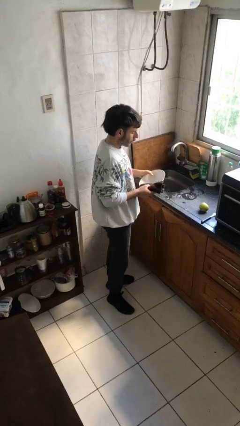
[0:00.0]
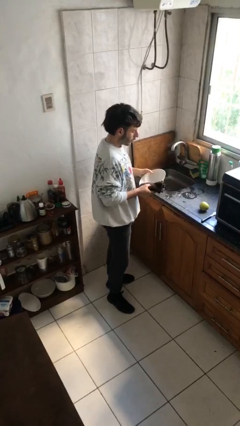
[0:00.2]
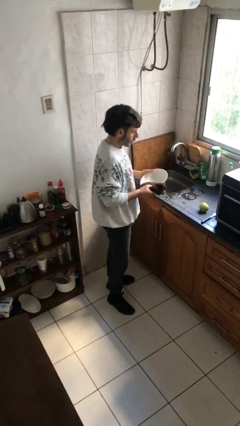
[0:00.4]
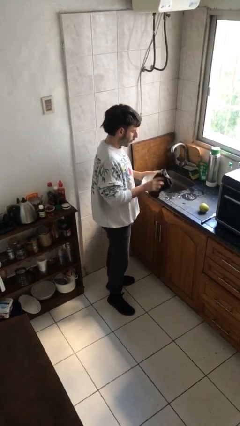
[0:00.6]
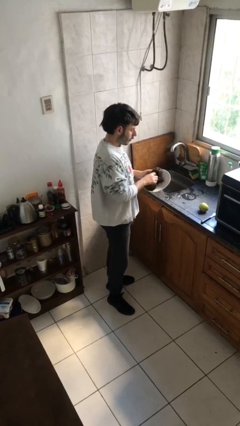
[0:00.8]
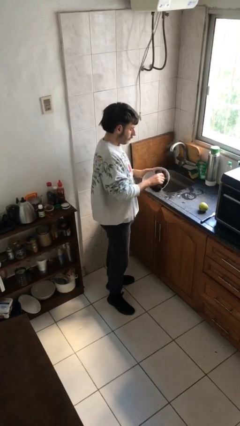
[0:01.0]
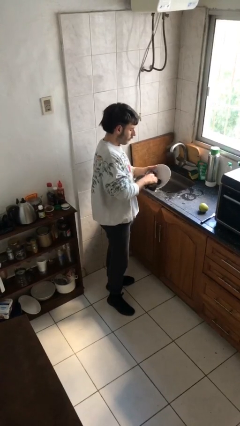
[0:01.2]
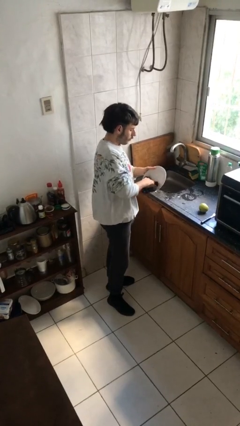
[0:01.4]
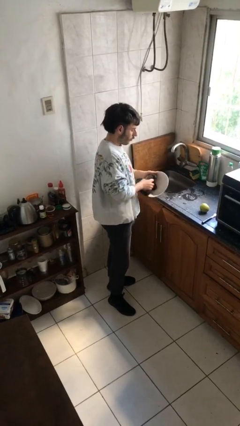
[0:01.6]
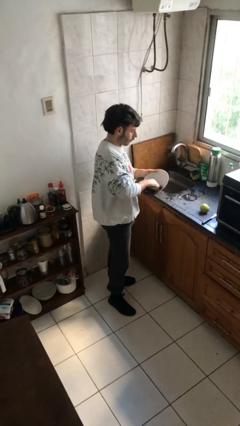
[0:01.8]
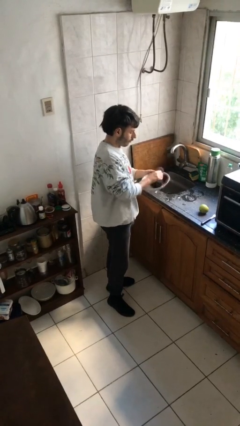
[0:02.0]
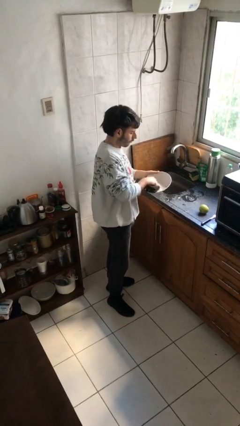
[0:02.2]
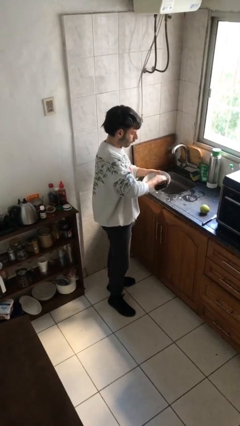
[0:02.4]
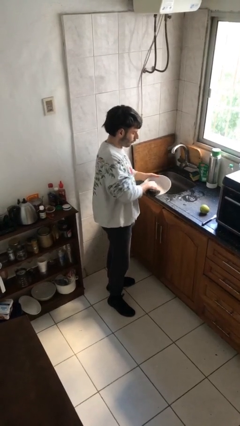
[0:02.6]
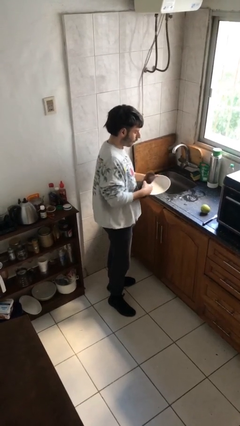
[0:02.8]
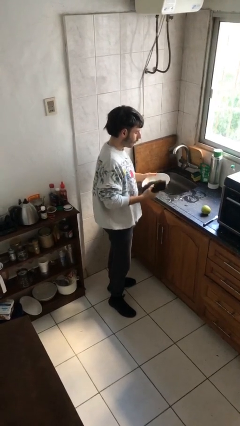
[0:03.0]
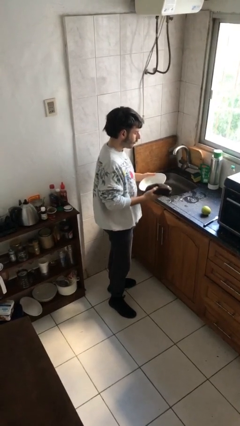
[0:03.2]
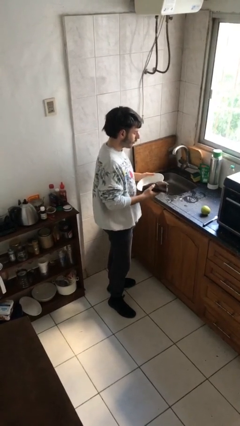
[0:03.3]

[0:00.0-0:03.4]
person dries dish

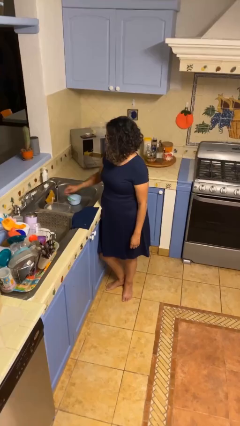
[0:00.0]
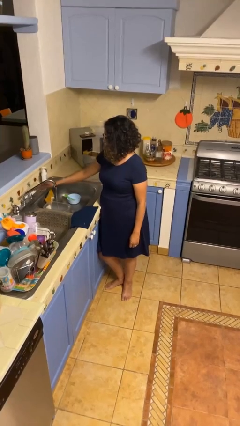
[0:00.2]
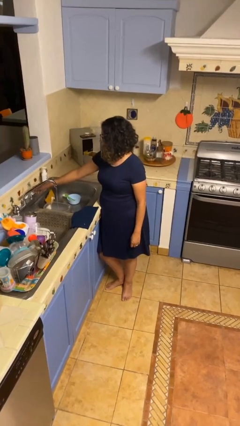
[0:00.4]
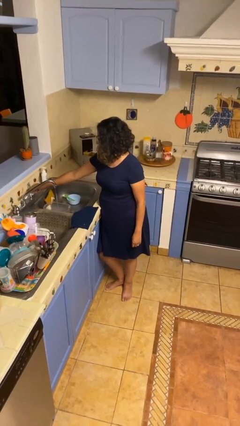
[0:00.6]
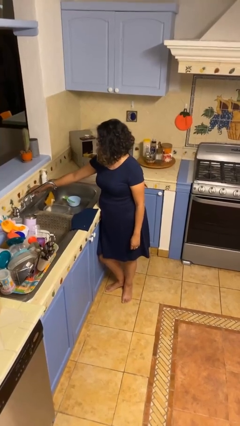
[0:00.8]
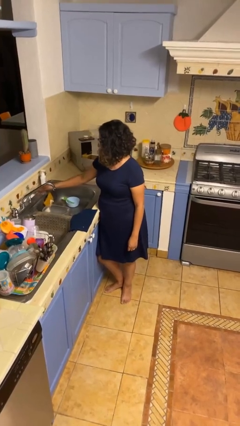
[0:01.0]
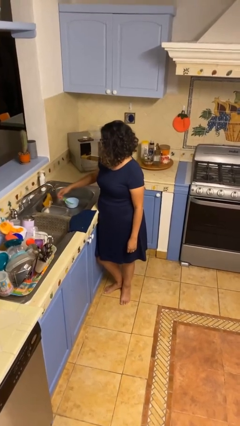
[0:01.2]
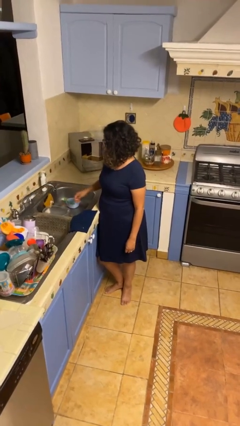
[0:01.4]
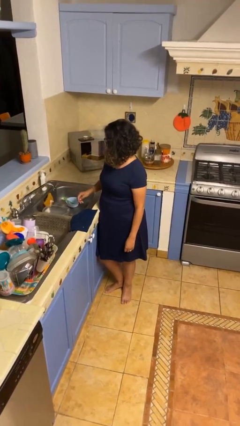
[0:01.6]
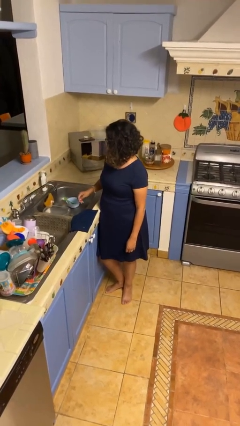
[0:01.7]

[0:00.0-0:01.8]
person turns off faucet

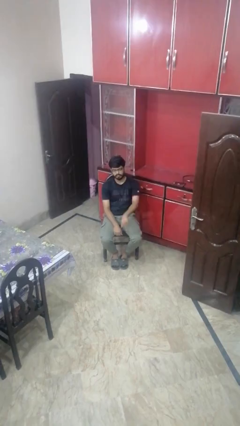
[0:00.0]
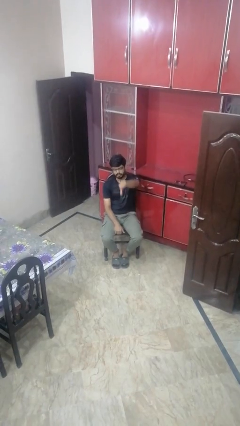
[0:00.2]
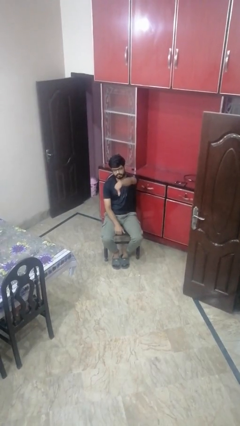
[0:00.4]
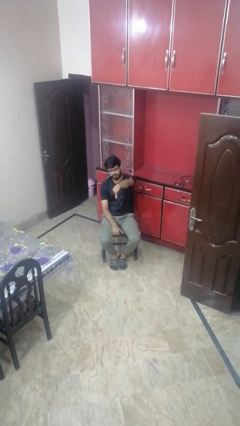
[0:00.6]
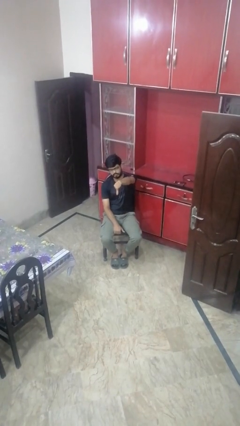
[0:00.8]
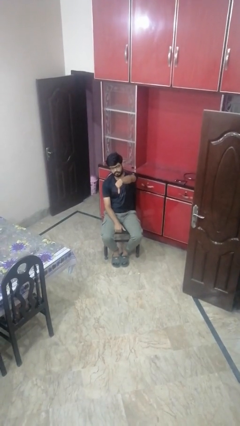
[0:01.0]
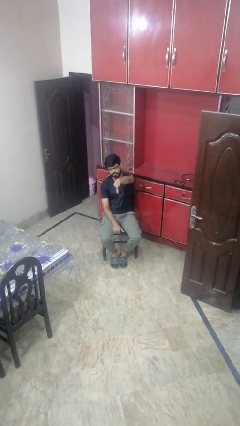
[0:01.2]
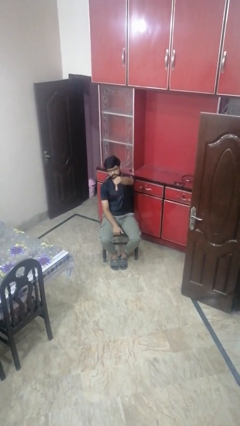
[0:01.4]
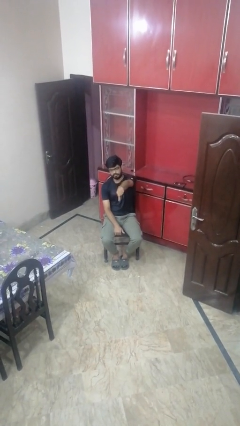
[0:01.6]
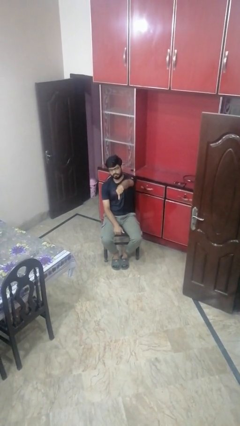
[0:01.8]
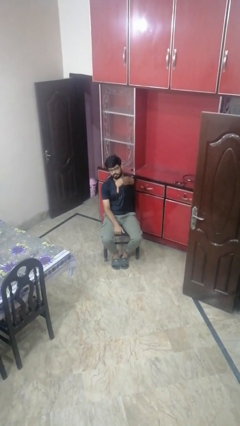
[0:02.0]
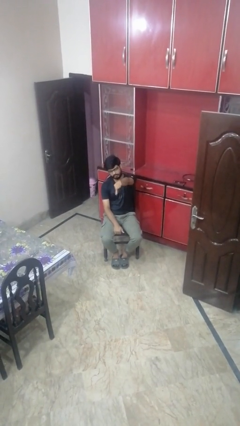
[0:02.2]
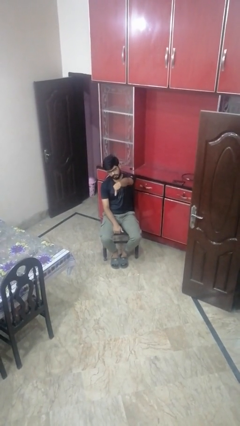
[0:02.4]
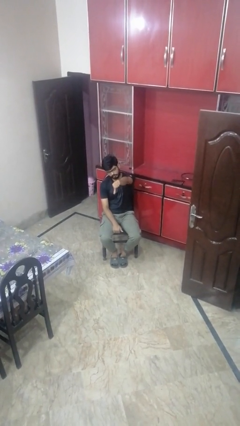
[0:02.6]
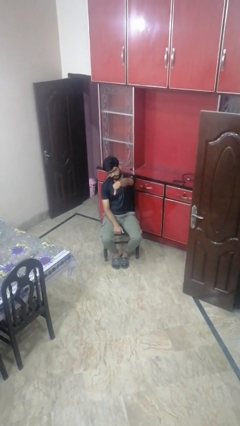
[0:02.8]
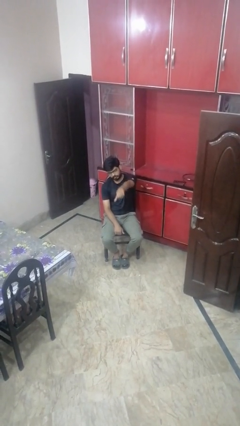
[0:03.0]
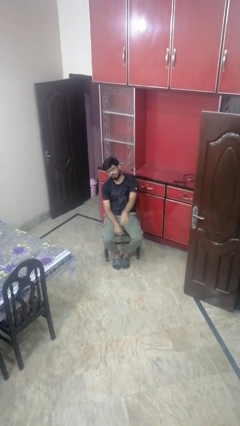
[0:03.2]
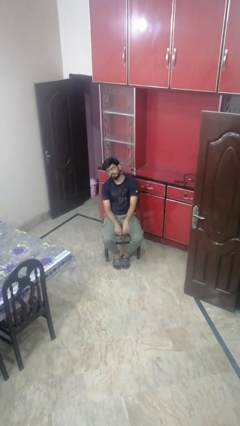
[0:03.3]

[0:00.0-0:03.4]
person gestures thumbs down

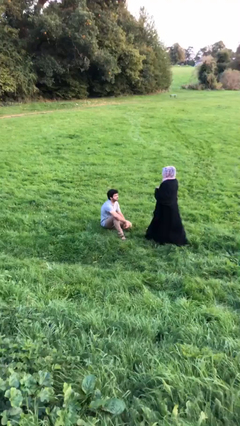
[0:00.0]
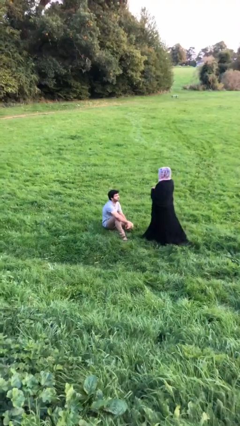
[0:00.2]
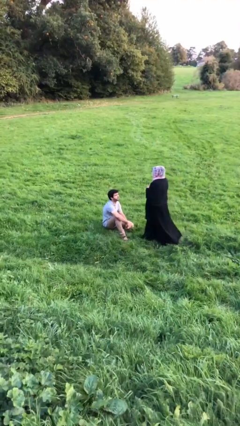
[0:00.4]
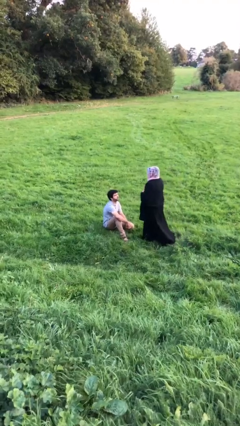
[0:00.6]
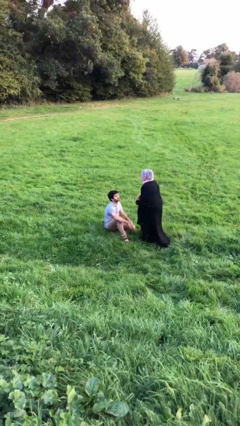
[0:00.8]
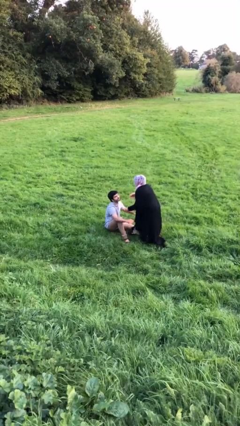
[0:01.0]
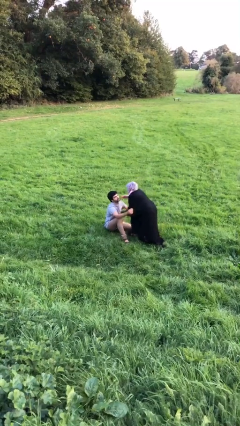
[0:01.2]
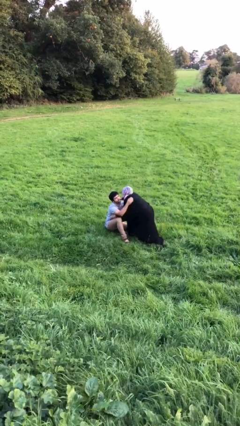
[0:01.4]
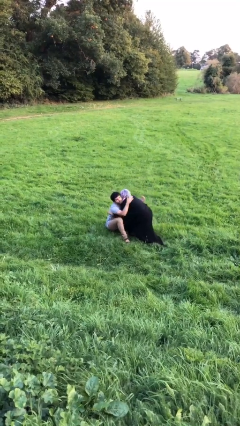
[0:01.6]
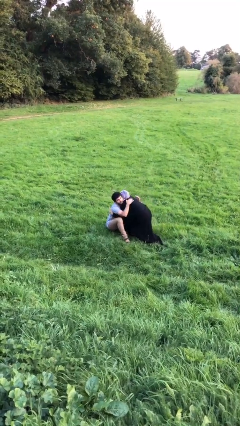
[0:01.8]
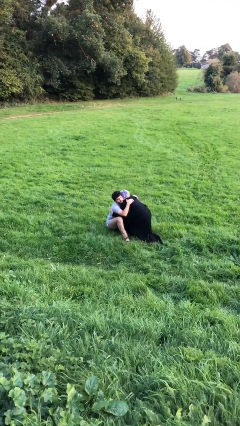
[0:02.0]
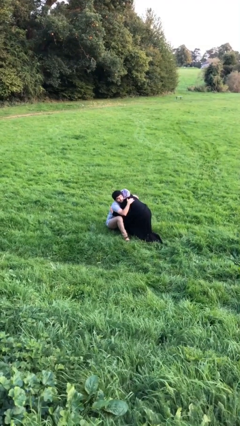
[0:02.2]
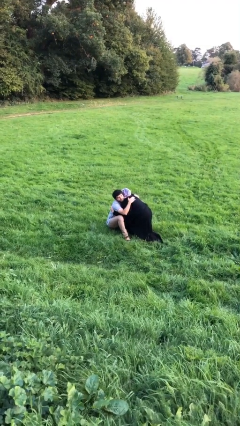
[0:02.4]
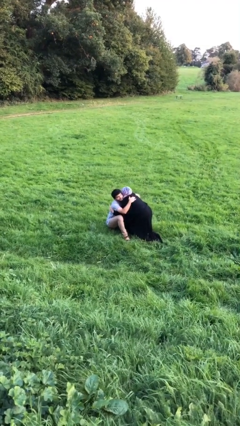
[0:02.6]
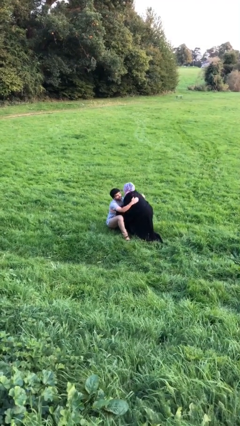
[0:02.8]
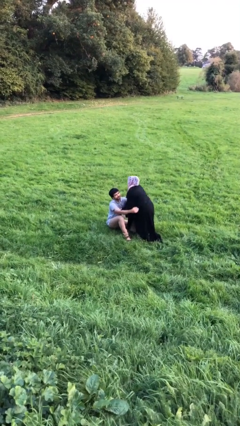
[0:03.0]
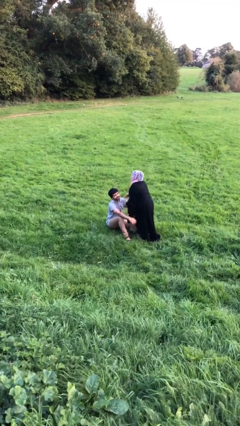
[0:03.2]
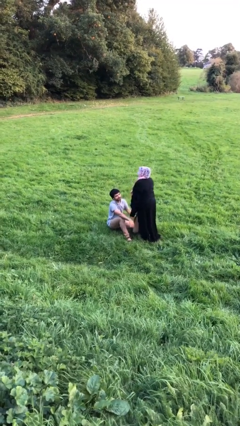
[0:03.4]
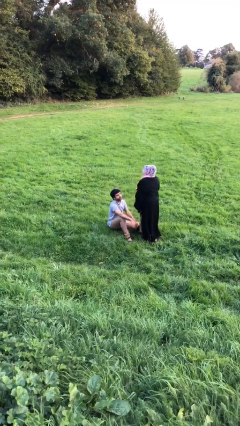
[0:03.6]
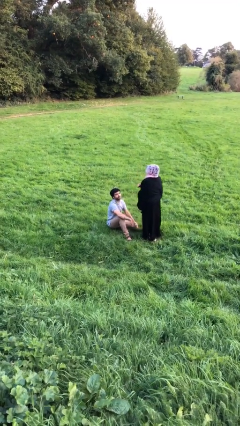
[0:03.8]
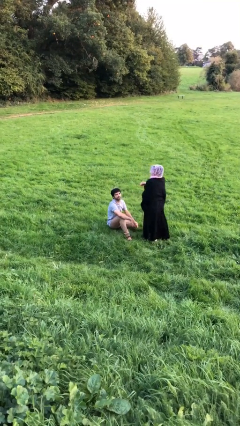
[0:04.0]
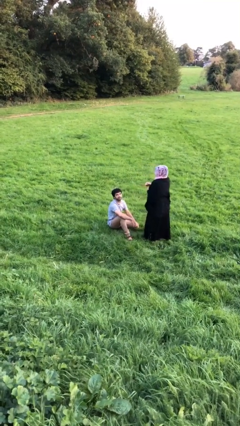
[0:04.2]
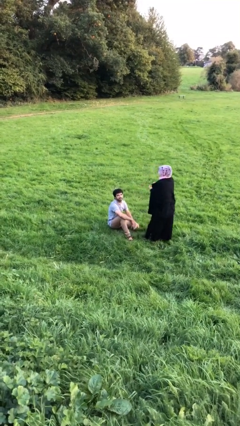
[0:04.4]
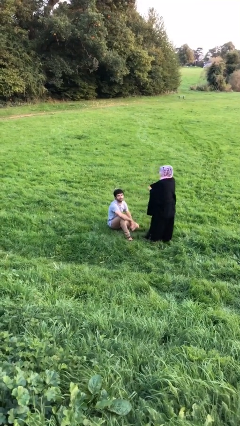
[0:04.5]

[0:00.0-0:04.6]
person embraces person

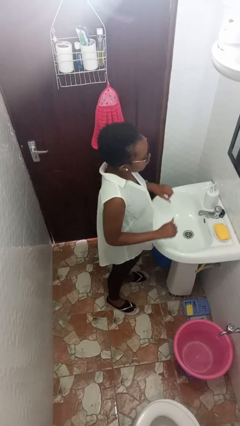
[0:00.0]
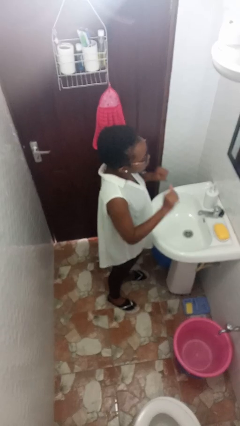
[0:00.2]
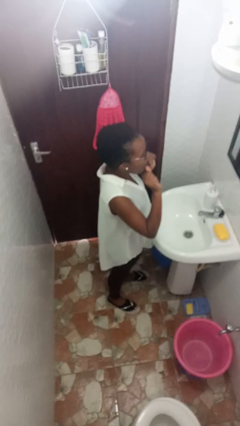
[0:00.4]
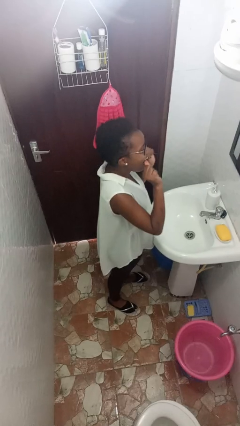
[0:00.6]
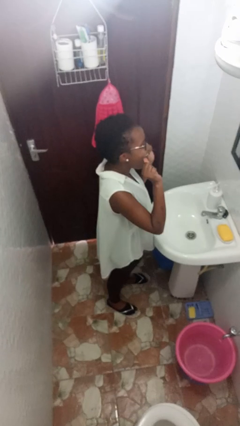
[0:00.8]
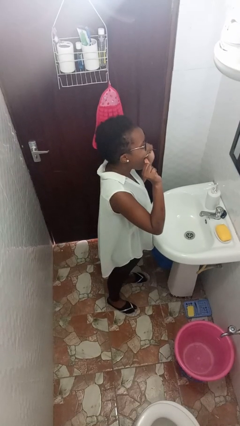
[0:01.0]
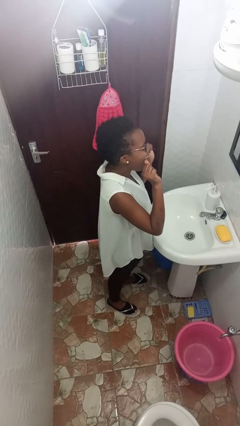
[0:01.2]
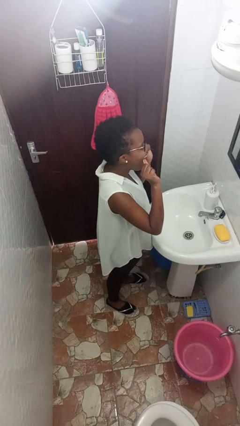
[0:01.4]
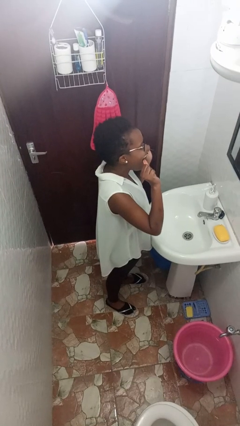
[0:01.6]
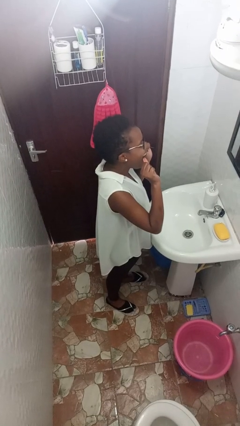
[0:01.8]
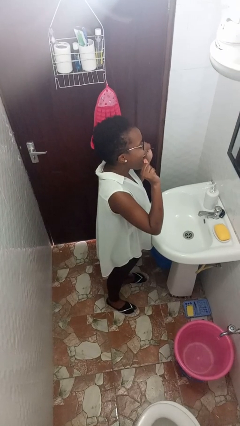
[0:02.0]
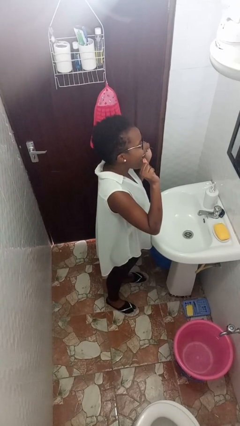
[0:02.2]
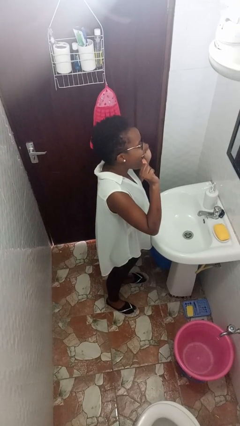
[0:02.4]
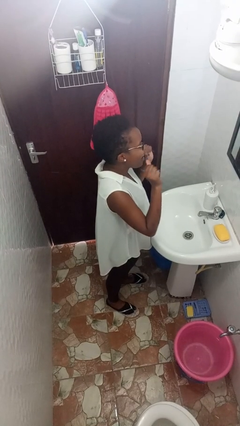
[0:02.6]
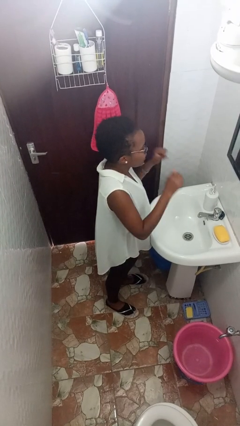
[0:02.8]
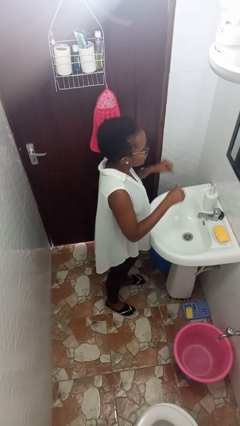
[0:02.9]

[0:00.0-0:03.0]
person flosses

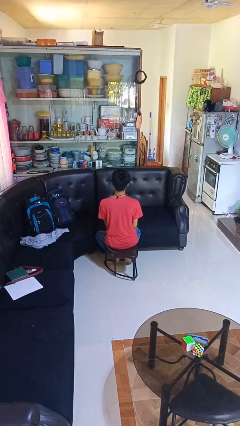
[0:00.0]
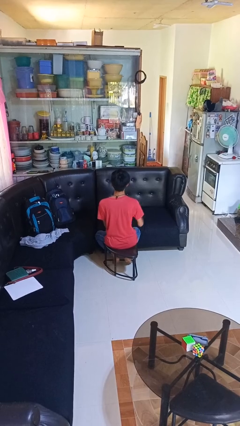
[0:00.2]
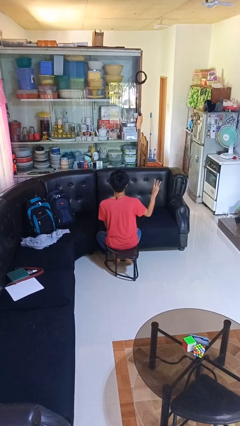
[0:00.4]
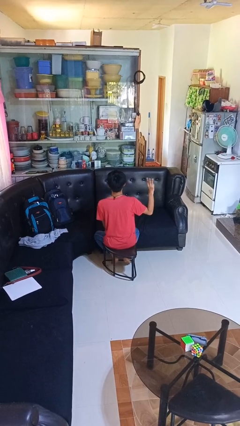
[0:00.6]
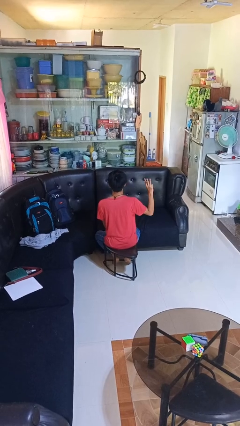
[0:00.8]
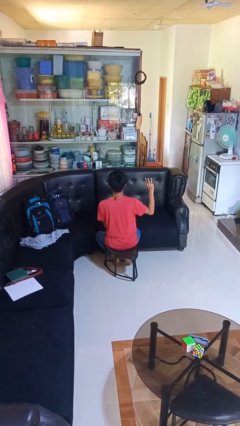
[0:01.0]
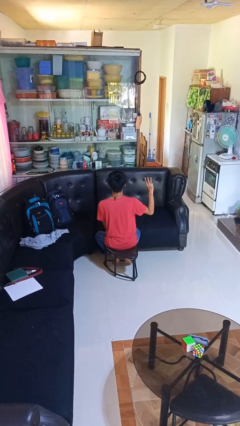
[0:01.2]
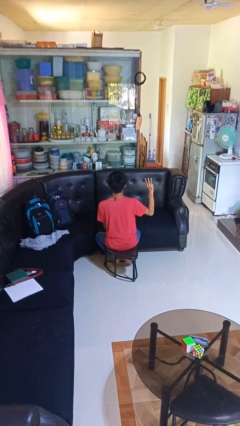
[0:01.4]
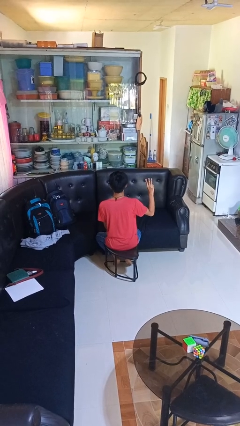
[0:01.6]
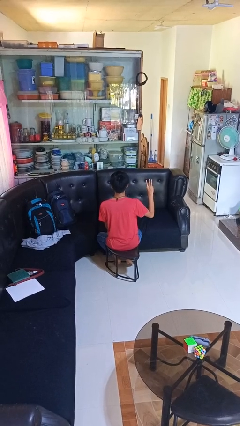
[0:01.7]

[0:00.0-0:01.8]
person gestures number three
